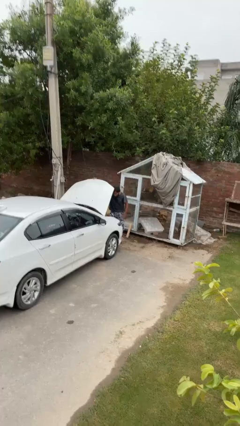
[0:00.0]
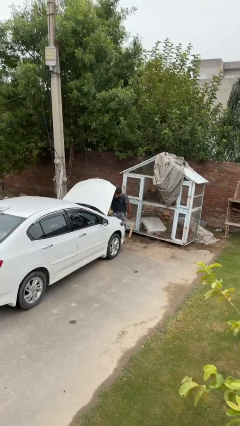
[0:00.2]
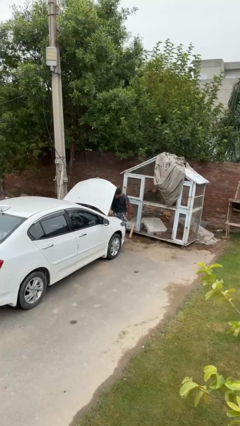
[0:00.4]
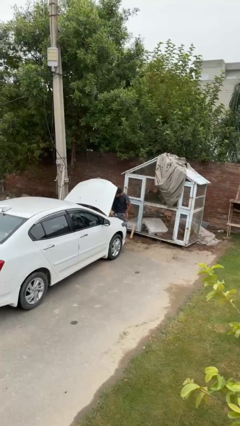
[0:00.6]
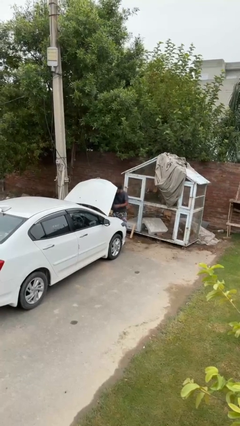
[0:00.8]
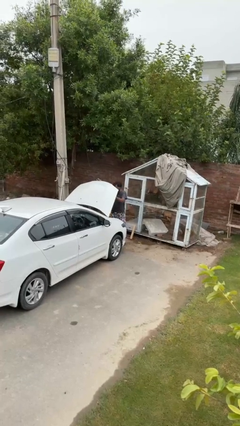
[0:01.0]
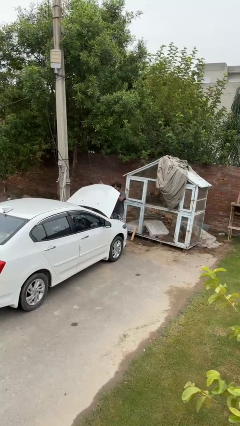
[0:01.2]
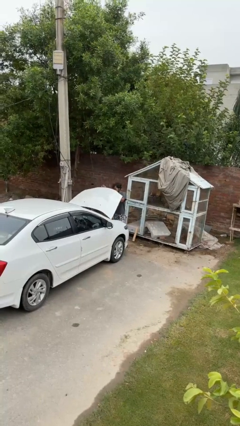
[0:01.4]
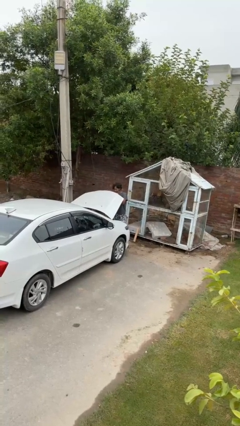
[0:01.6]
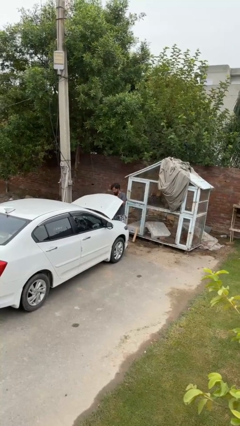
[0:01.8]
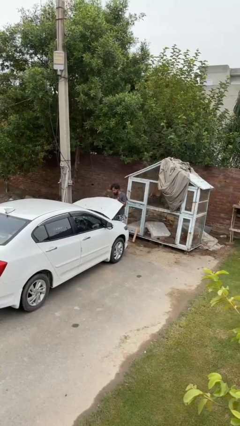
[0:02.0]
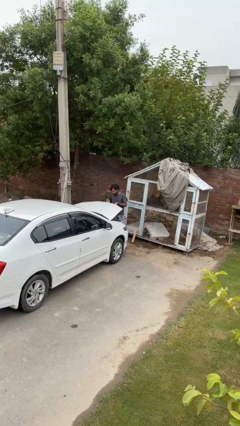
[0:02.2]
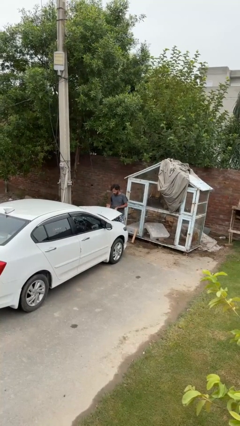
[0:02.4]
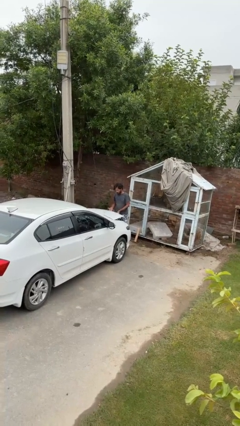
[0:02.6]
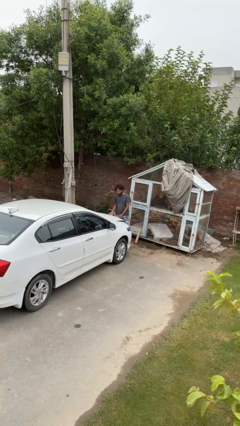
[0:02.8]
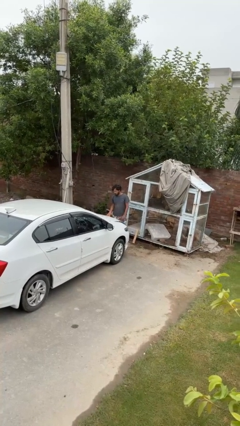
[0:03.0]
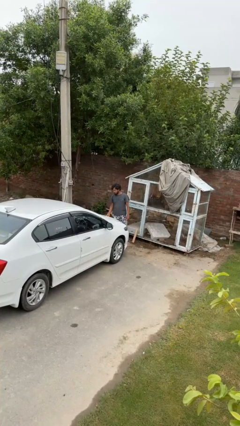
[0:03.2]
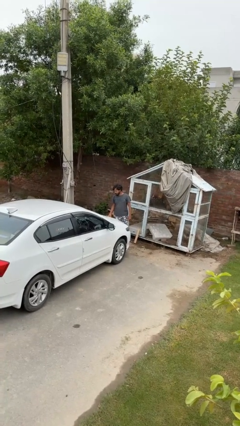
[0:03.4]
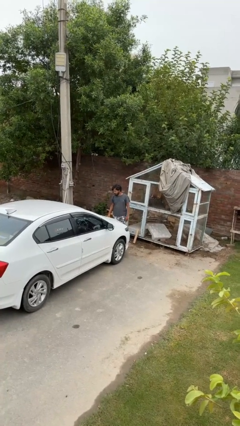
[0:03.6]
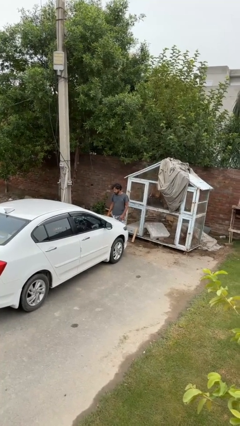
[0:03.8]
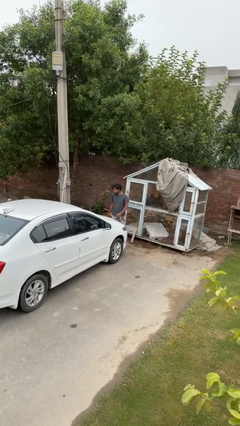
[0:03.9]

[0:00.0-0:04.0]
person closes car hood

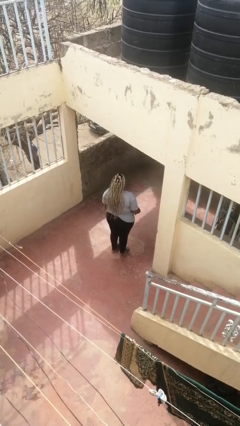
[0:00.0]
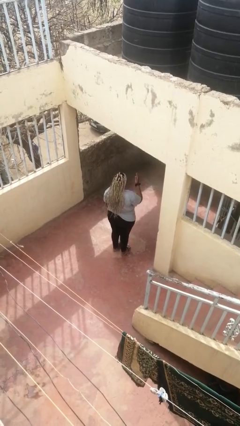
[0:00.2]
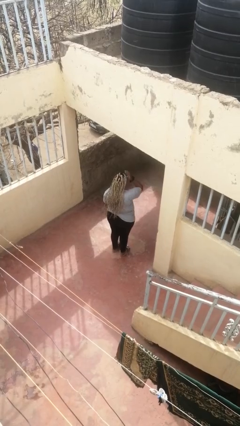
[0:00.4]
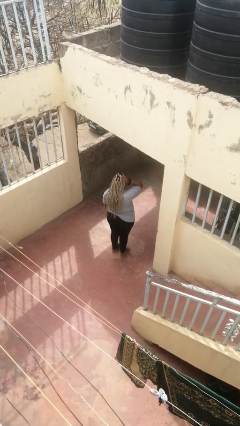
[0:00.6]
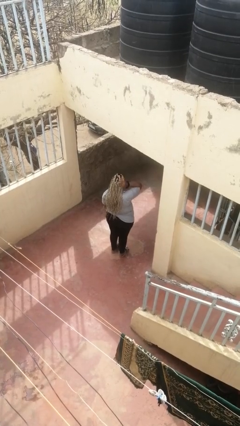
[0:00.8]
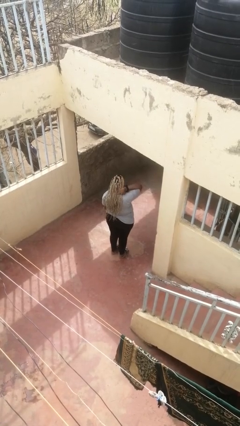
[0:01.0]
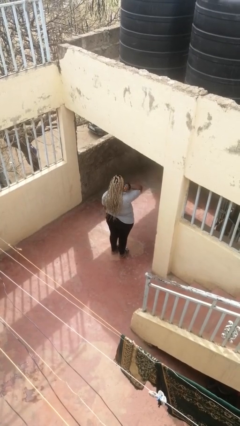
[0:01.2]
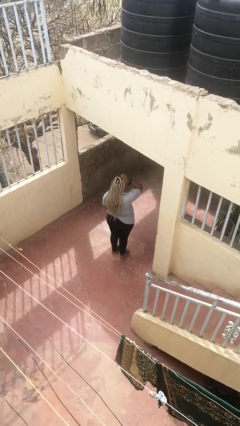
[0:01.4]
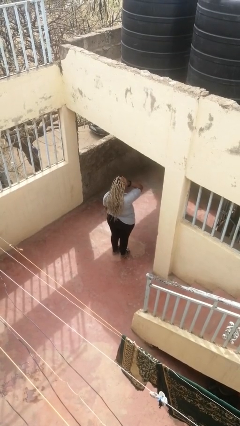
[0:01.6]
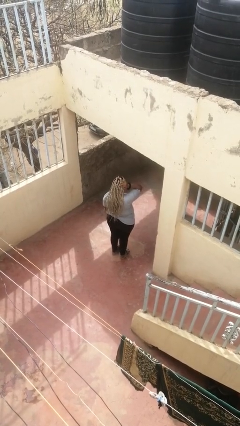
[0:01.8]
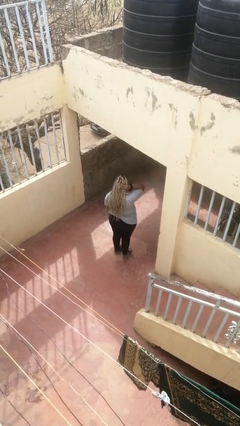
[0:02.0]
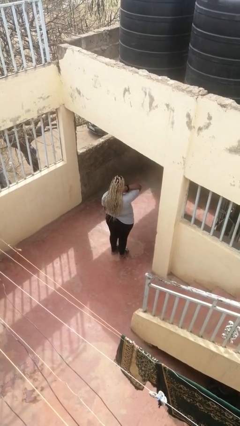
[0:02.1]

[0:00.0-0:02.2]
person strokes hair

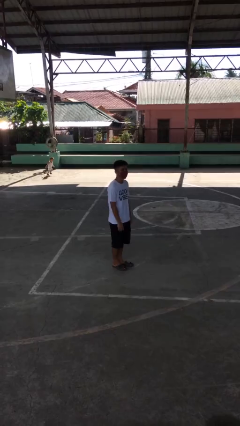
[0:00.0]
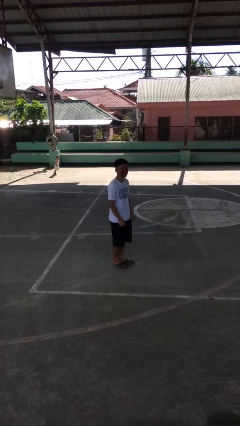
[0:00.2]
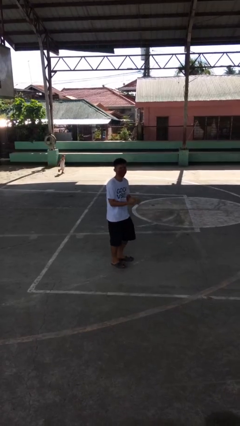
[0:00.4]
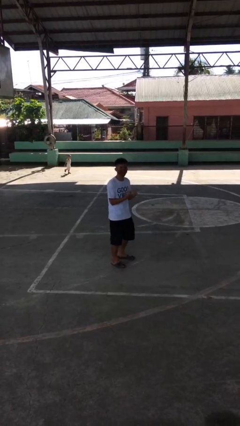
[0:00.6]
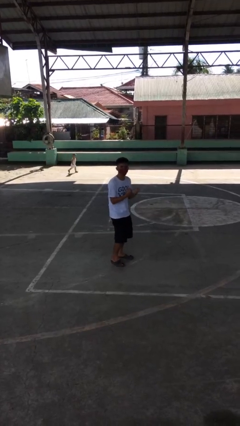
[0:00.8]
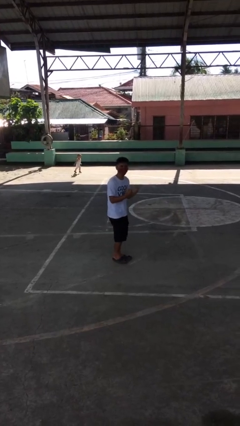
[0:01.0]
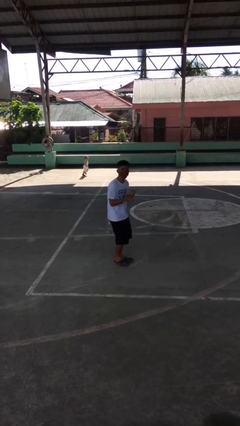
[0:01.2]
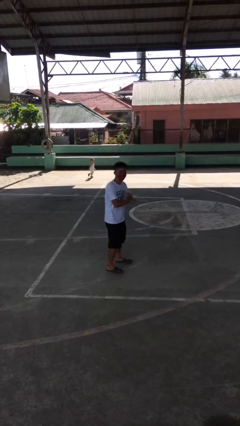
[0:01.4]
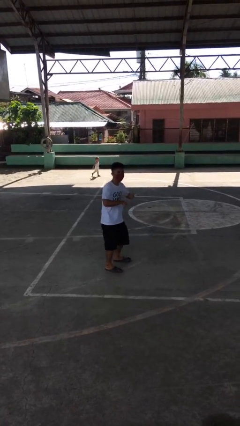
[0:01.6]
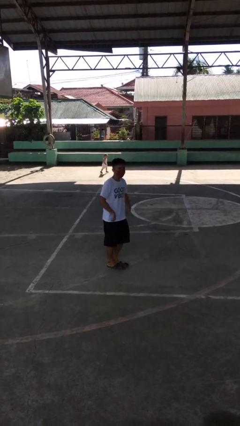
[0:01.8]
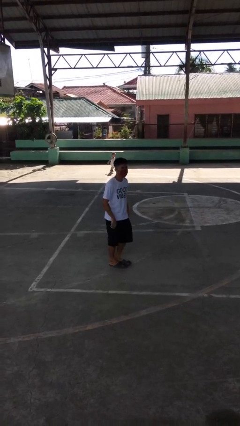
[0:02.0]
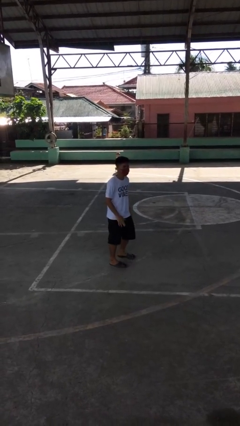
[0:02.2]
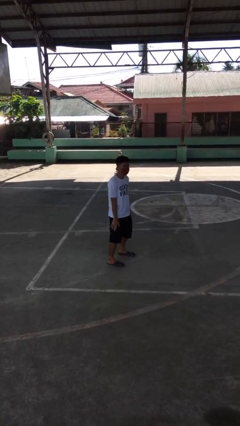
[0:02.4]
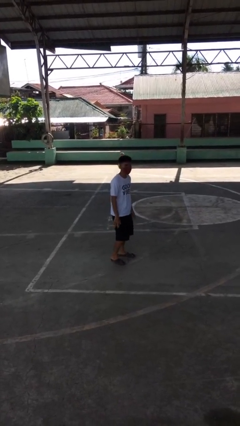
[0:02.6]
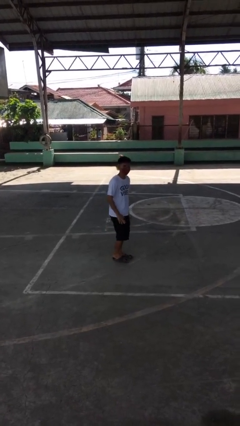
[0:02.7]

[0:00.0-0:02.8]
person dances in place

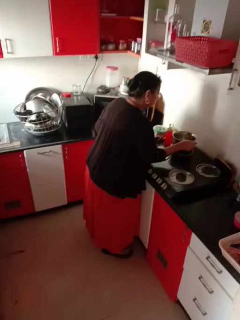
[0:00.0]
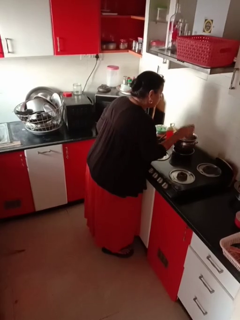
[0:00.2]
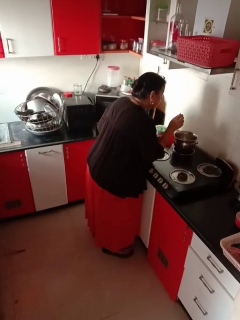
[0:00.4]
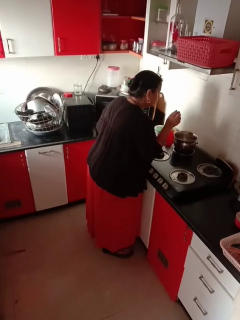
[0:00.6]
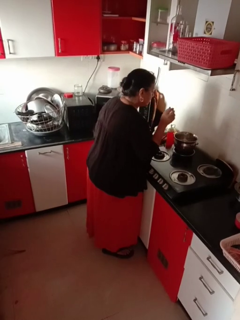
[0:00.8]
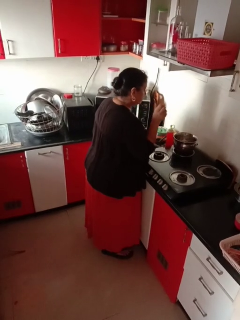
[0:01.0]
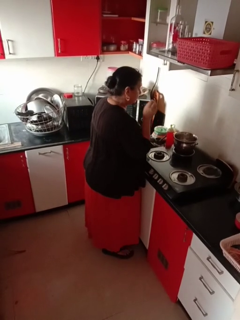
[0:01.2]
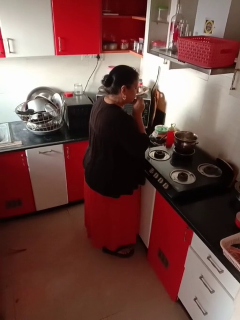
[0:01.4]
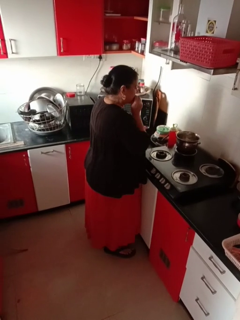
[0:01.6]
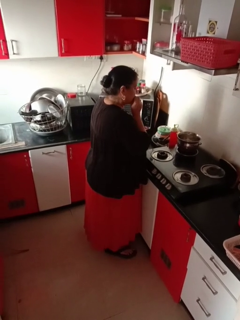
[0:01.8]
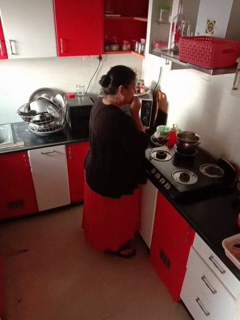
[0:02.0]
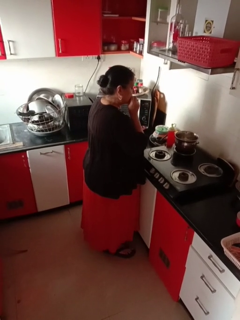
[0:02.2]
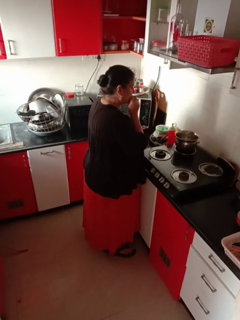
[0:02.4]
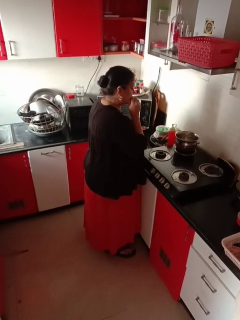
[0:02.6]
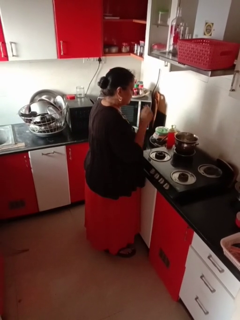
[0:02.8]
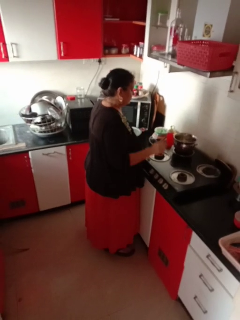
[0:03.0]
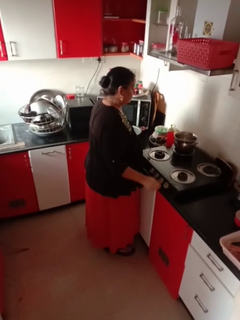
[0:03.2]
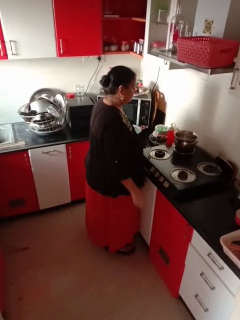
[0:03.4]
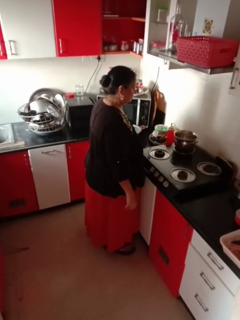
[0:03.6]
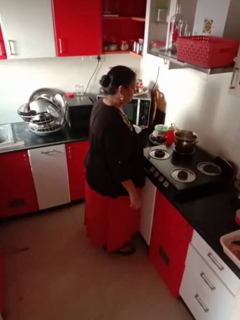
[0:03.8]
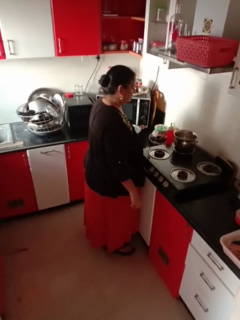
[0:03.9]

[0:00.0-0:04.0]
person burns hand

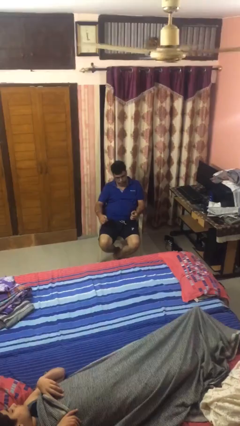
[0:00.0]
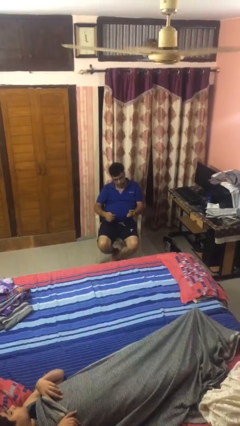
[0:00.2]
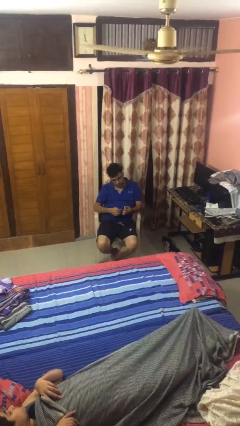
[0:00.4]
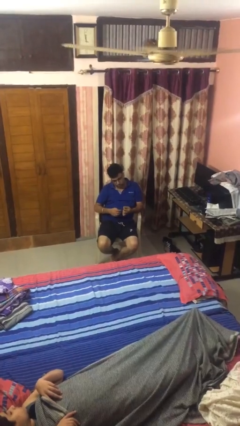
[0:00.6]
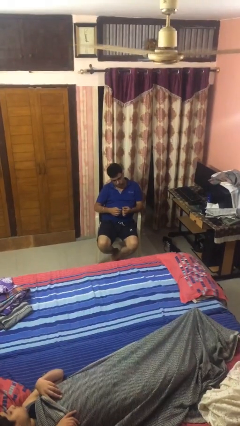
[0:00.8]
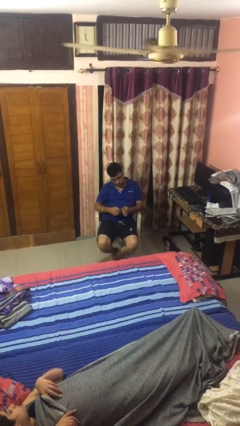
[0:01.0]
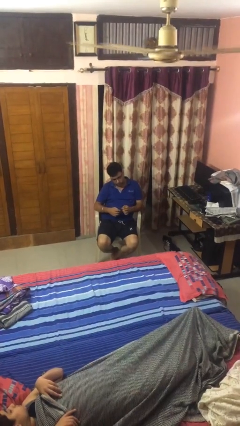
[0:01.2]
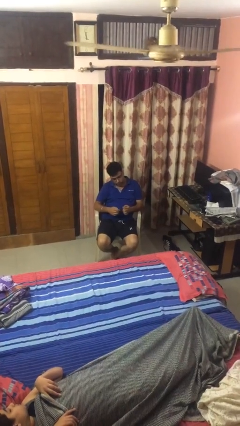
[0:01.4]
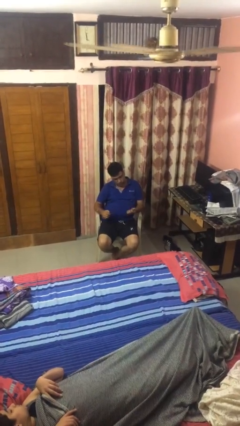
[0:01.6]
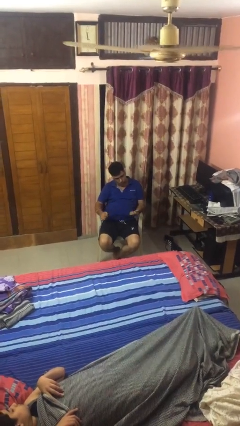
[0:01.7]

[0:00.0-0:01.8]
person files fingernails

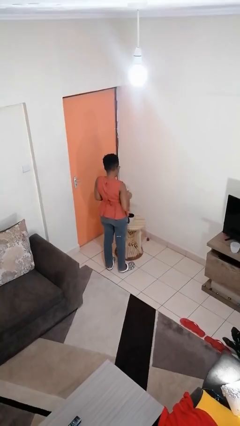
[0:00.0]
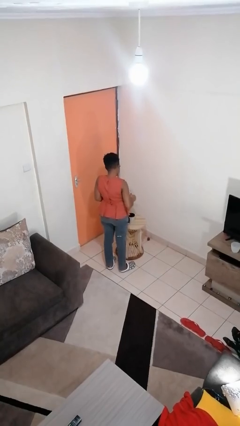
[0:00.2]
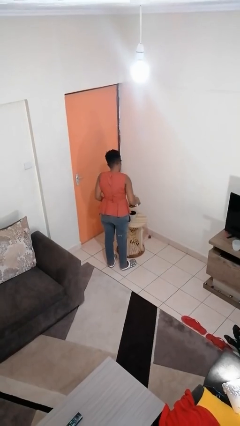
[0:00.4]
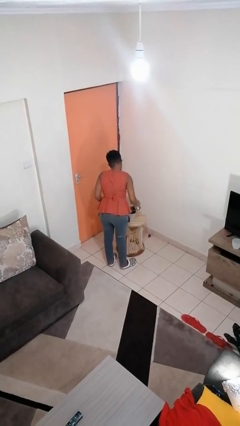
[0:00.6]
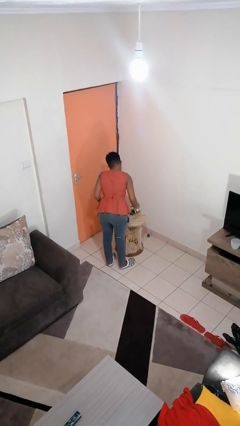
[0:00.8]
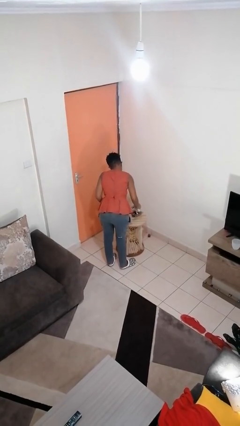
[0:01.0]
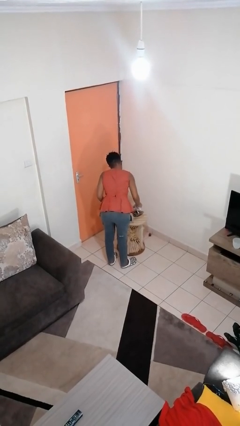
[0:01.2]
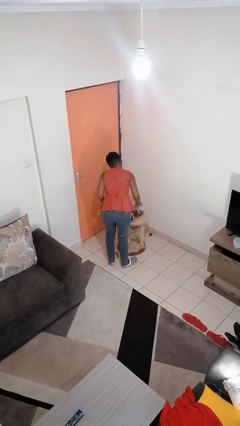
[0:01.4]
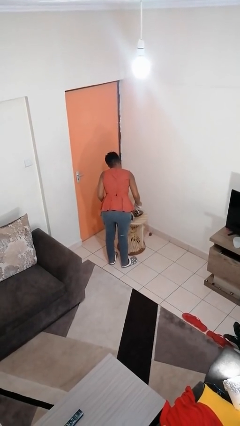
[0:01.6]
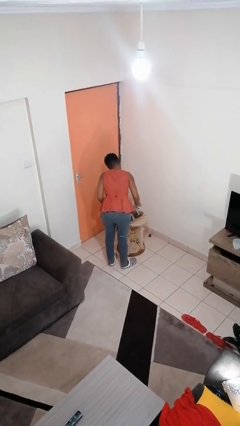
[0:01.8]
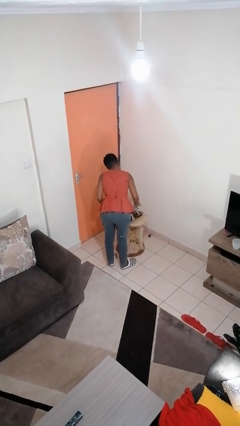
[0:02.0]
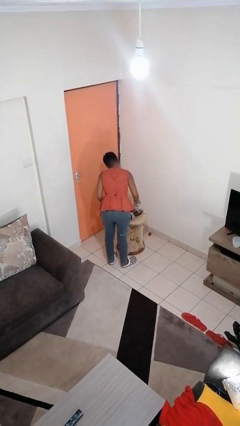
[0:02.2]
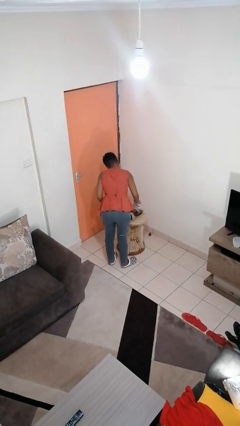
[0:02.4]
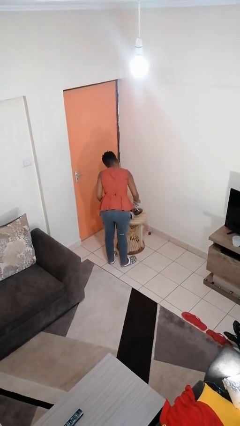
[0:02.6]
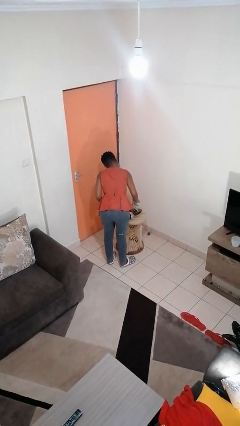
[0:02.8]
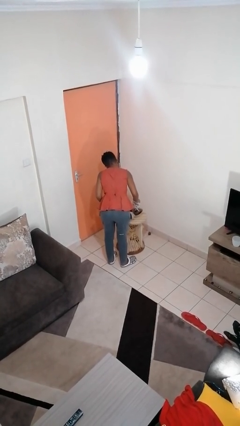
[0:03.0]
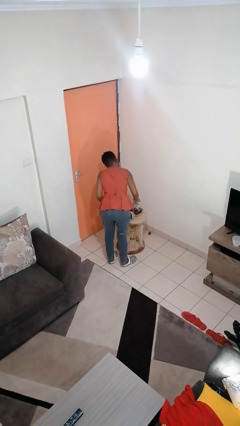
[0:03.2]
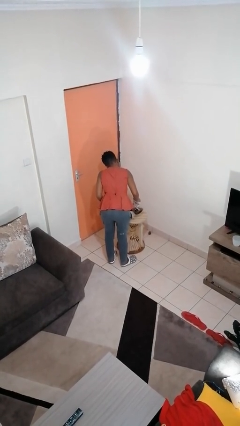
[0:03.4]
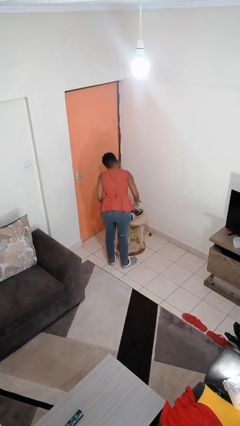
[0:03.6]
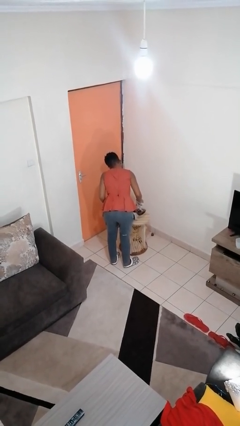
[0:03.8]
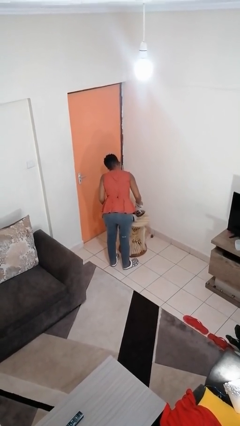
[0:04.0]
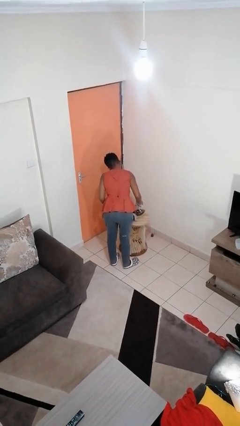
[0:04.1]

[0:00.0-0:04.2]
person pours coffee into mug
